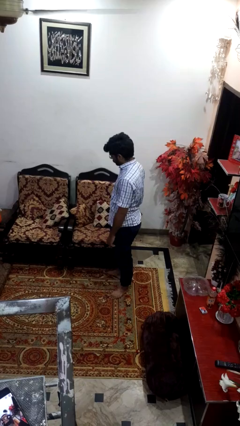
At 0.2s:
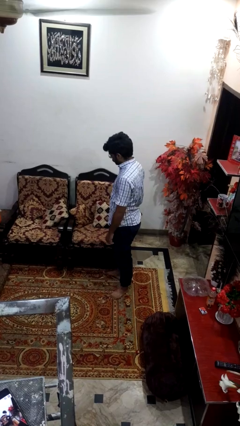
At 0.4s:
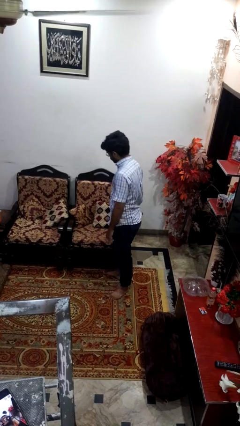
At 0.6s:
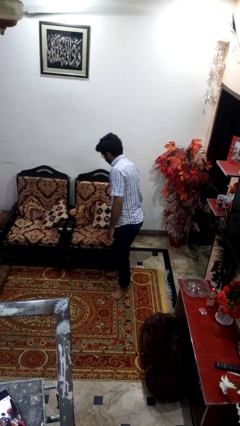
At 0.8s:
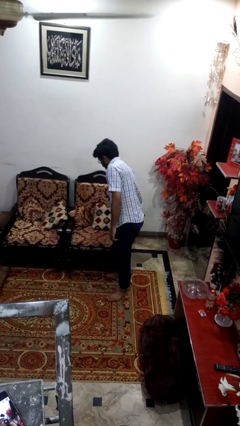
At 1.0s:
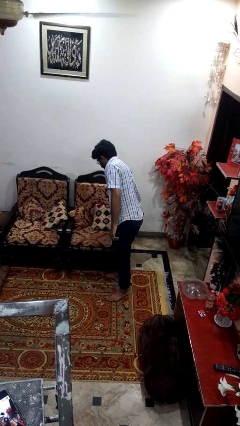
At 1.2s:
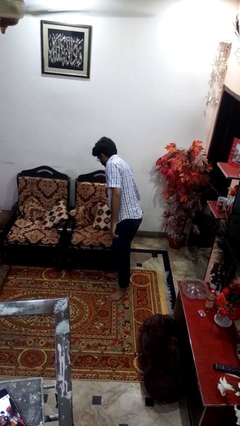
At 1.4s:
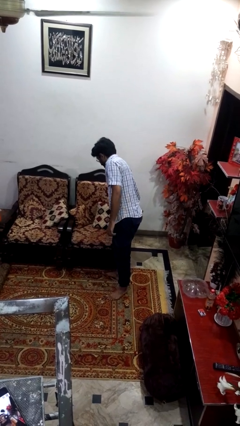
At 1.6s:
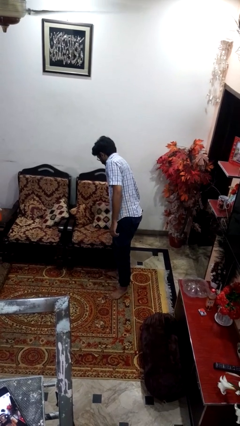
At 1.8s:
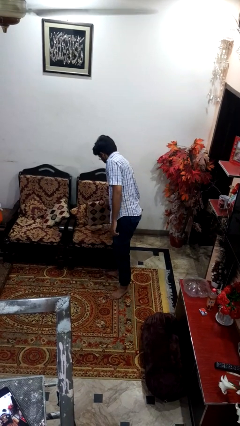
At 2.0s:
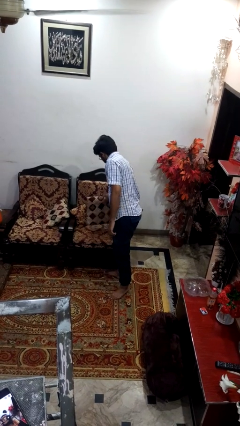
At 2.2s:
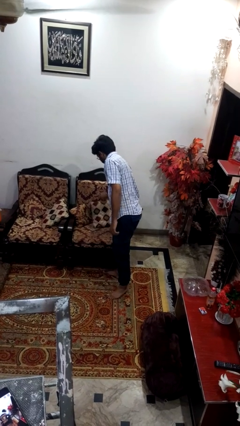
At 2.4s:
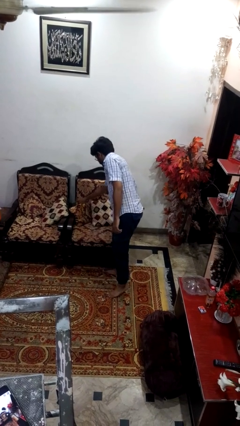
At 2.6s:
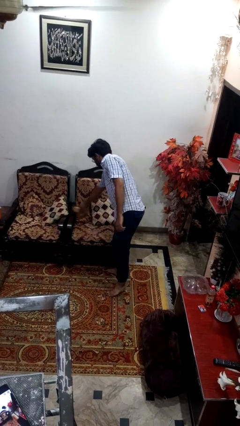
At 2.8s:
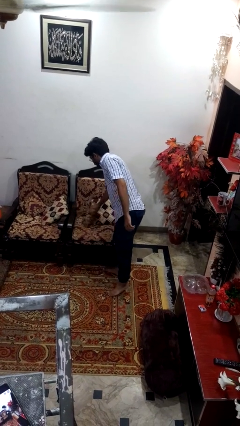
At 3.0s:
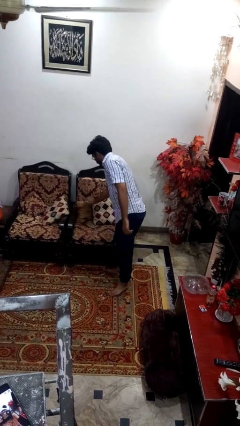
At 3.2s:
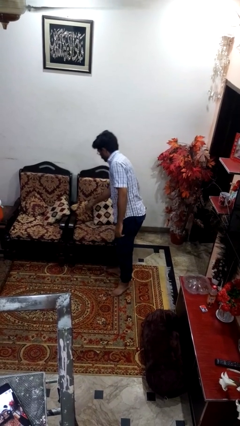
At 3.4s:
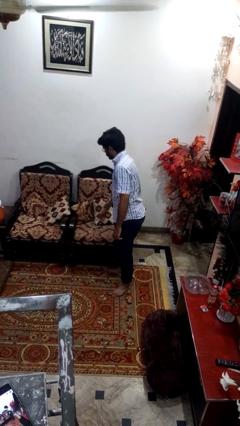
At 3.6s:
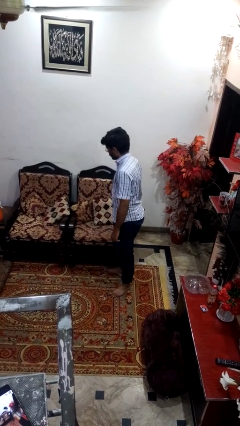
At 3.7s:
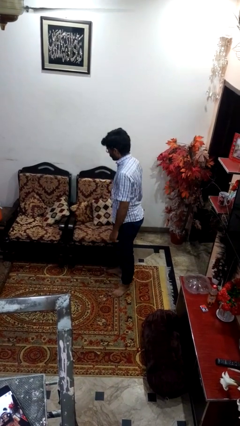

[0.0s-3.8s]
person searches in couch

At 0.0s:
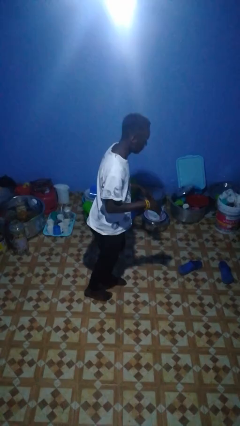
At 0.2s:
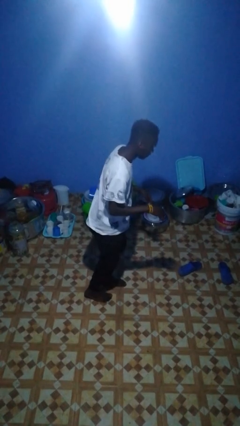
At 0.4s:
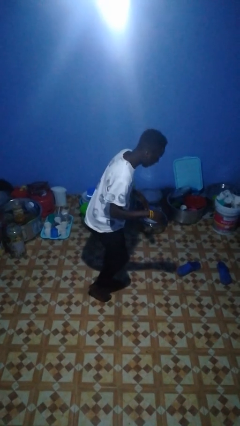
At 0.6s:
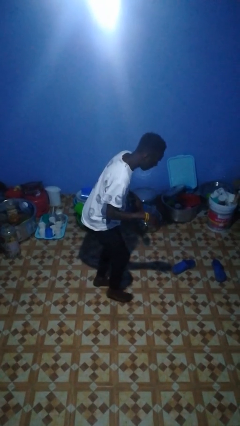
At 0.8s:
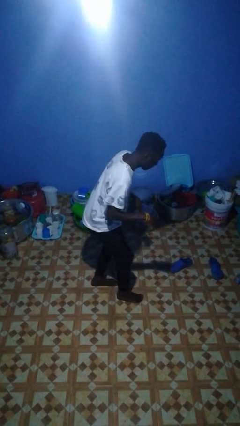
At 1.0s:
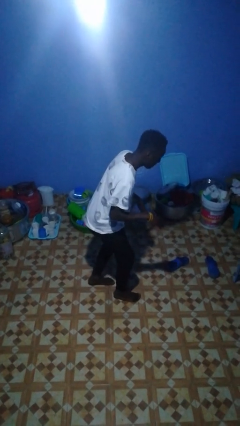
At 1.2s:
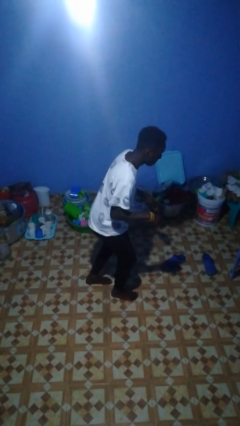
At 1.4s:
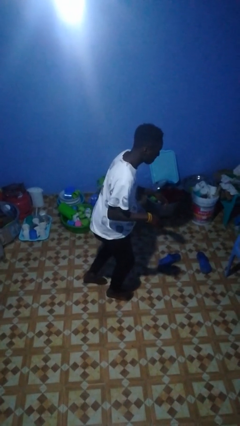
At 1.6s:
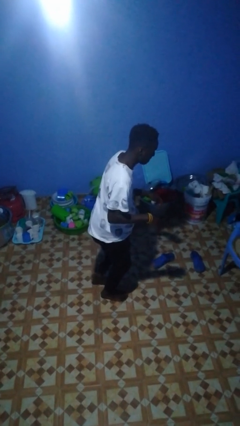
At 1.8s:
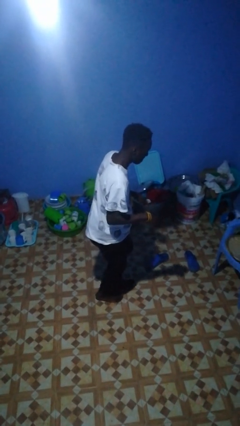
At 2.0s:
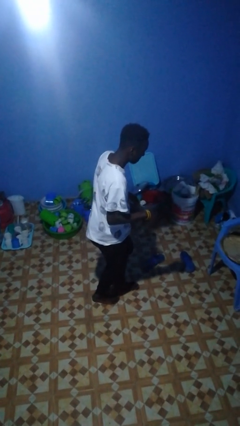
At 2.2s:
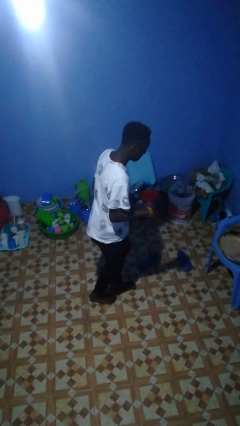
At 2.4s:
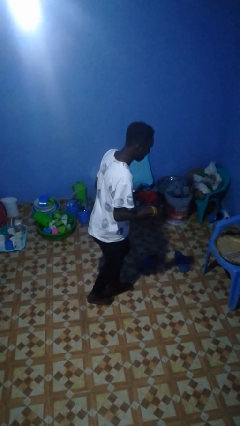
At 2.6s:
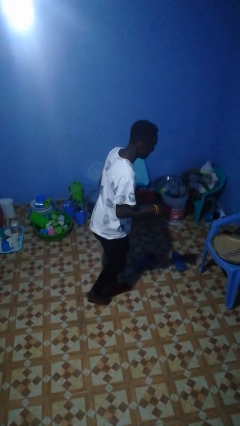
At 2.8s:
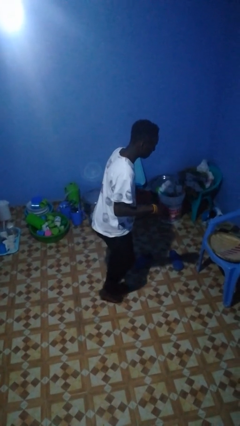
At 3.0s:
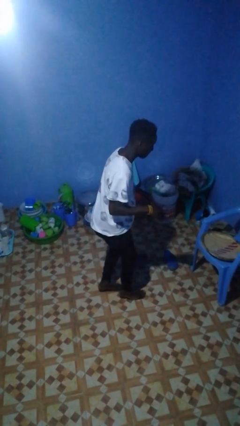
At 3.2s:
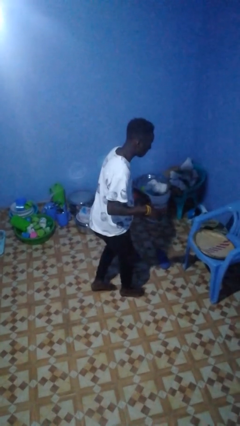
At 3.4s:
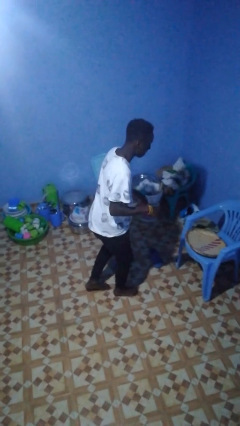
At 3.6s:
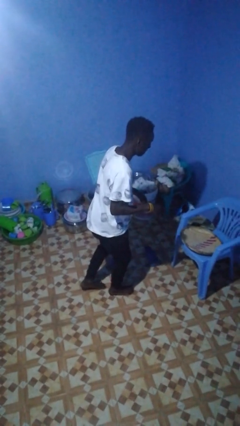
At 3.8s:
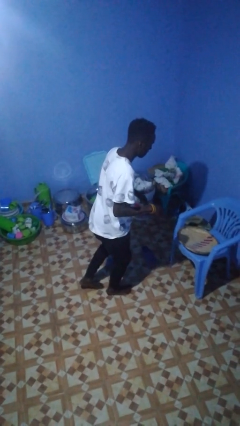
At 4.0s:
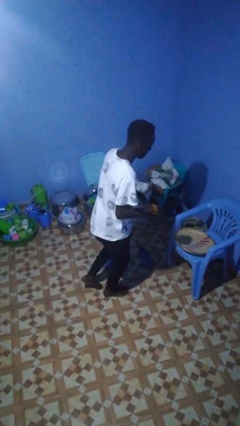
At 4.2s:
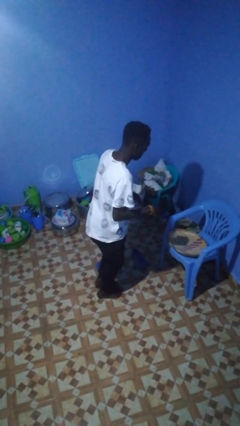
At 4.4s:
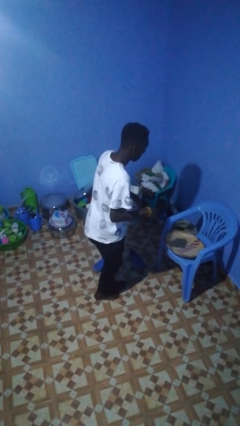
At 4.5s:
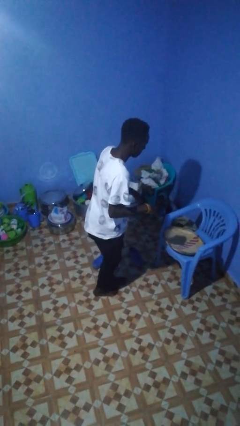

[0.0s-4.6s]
person walks tiptoe

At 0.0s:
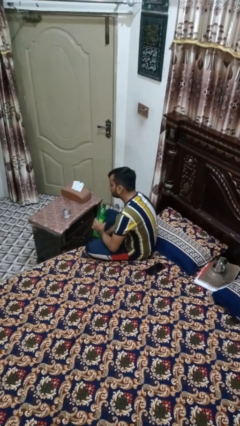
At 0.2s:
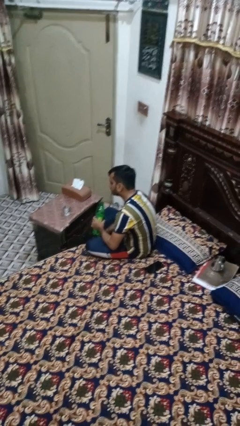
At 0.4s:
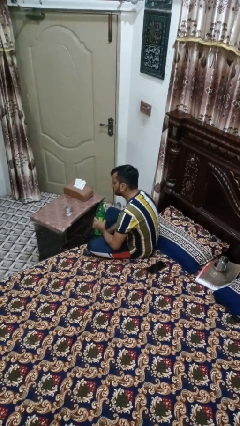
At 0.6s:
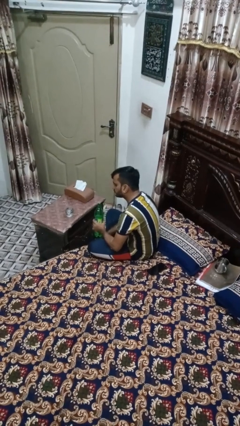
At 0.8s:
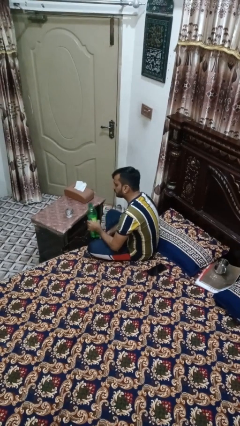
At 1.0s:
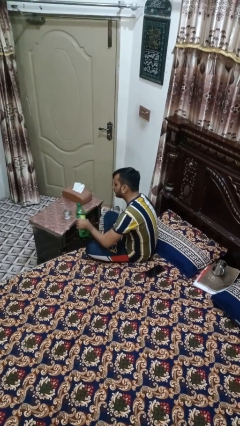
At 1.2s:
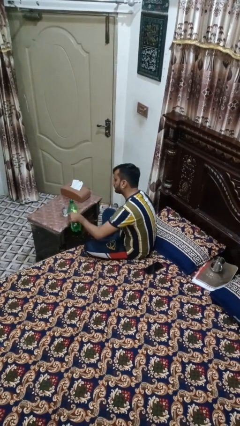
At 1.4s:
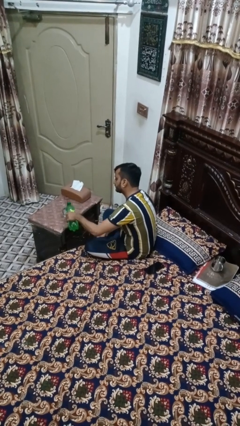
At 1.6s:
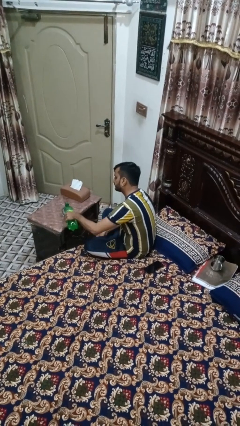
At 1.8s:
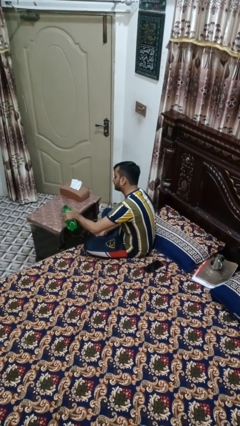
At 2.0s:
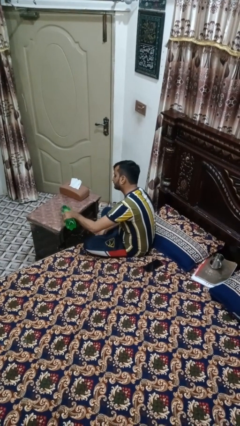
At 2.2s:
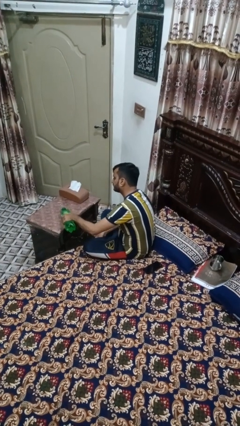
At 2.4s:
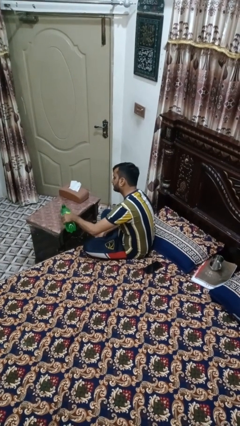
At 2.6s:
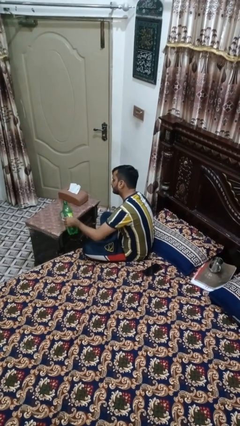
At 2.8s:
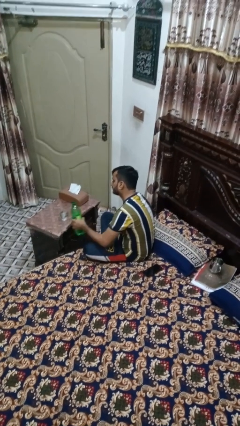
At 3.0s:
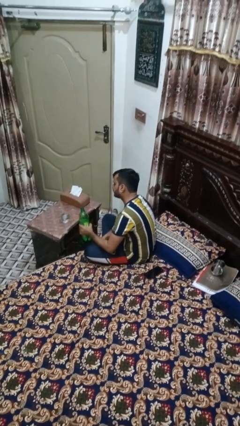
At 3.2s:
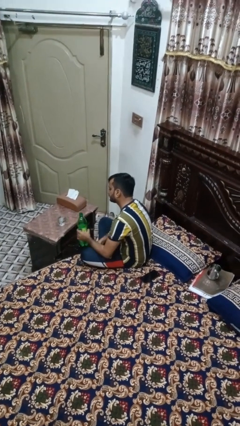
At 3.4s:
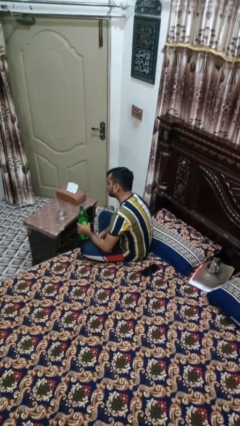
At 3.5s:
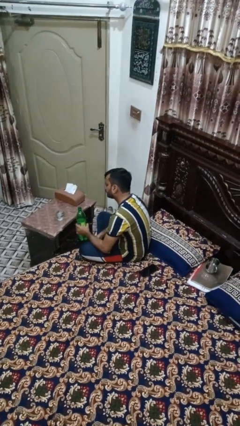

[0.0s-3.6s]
person pours liquid into cup

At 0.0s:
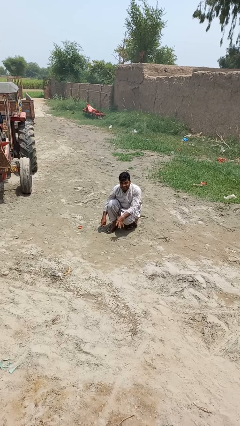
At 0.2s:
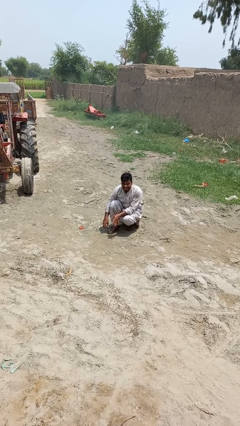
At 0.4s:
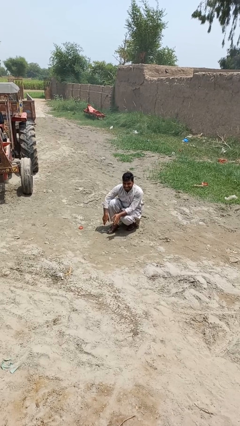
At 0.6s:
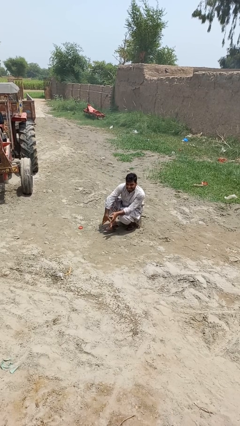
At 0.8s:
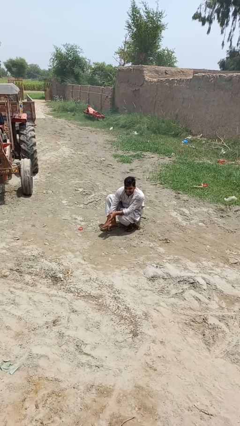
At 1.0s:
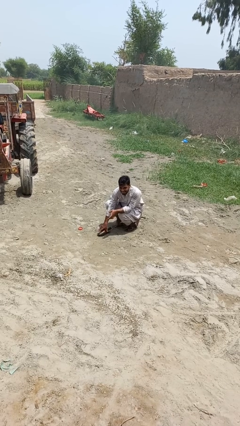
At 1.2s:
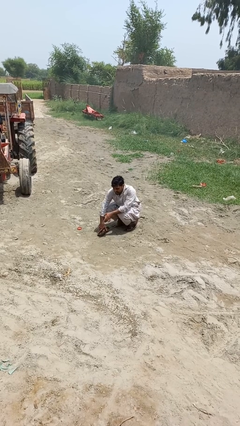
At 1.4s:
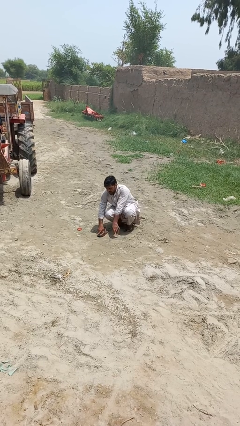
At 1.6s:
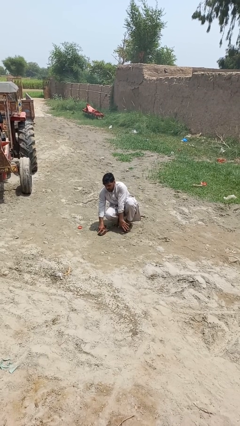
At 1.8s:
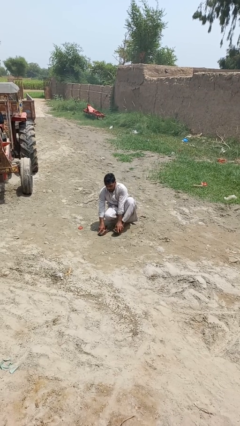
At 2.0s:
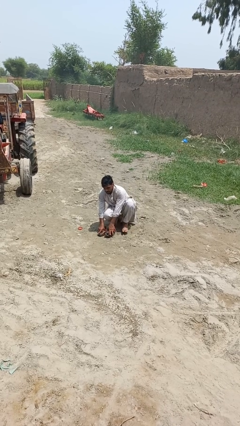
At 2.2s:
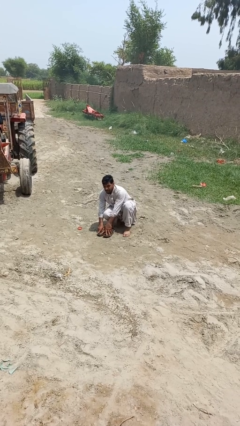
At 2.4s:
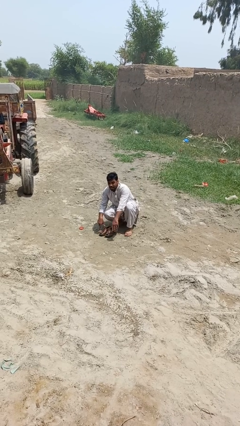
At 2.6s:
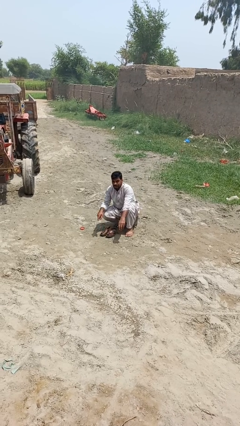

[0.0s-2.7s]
person takes off shoes

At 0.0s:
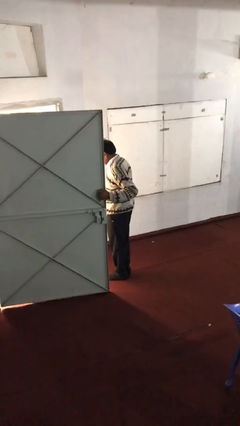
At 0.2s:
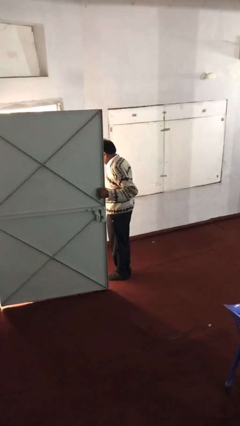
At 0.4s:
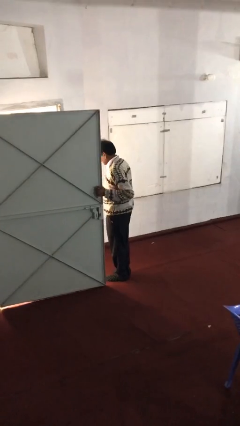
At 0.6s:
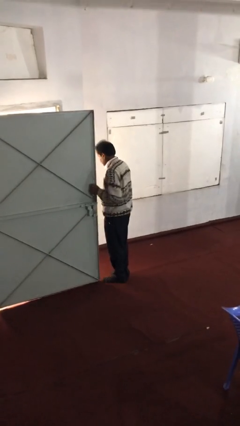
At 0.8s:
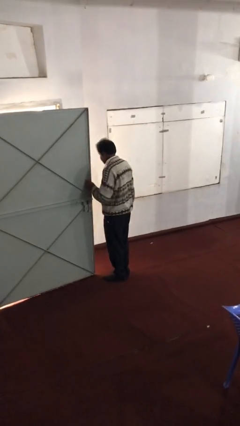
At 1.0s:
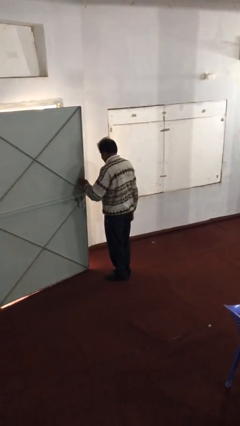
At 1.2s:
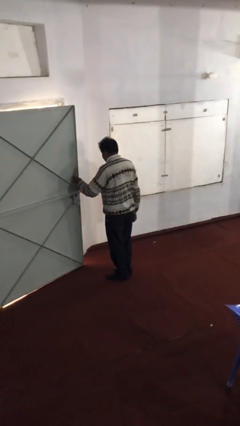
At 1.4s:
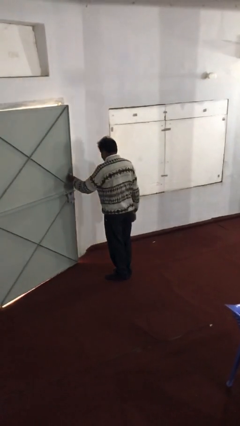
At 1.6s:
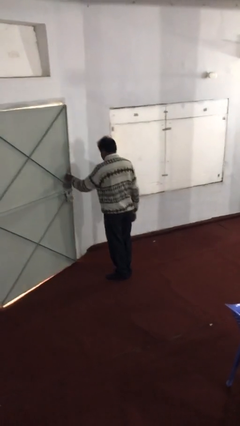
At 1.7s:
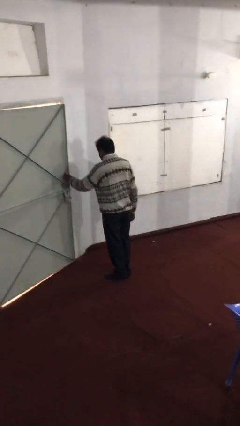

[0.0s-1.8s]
person closes facility door

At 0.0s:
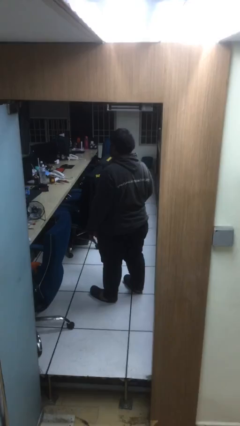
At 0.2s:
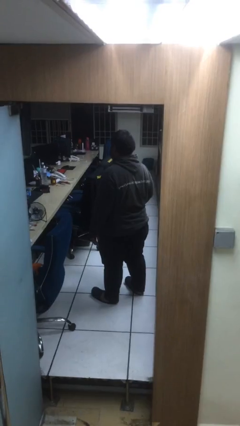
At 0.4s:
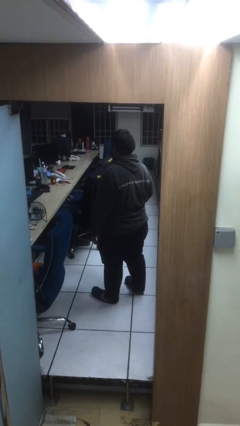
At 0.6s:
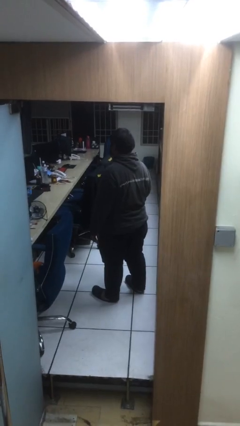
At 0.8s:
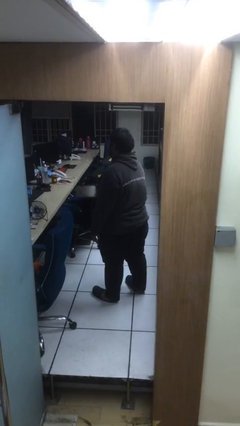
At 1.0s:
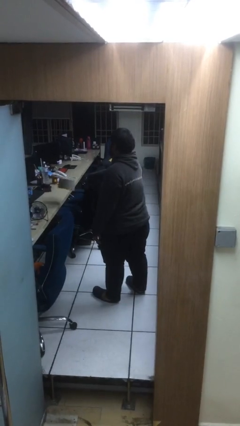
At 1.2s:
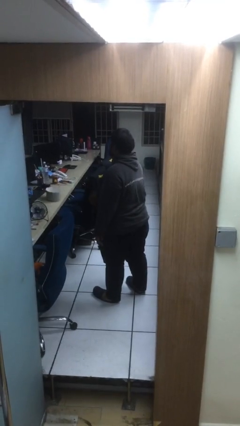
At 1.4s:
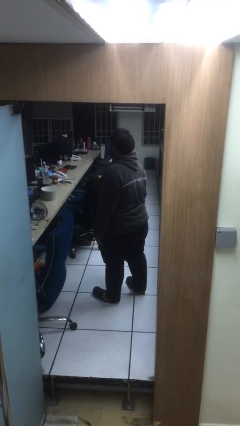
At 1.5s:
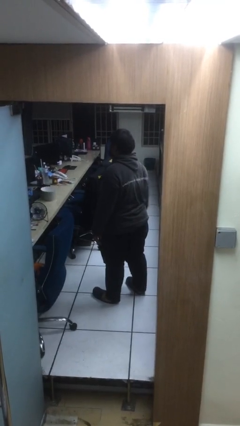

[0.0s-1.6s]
person throws object on table
